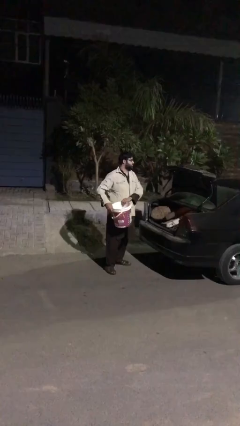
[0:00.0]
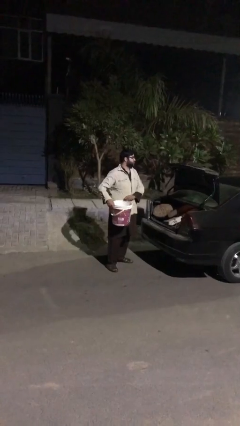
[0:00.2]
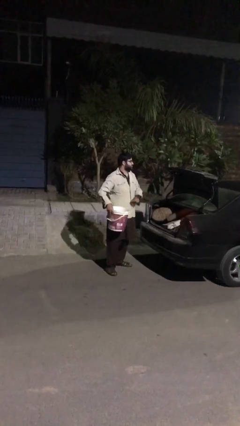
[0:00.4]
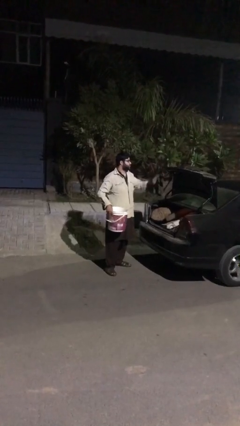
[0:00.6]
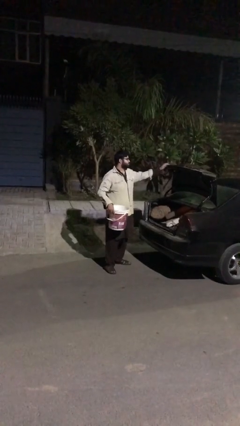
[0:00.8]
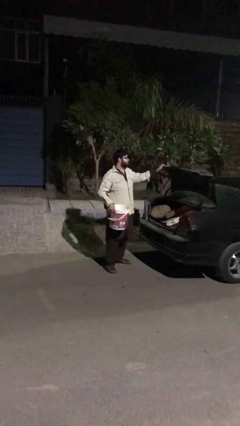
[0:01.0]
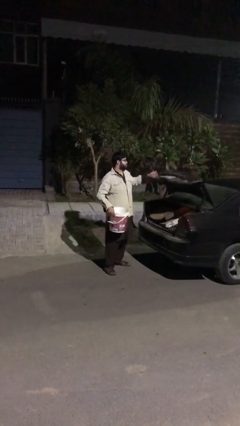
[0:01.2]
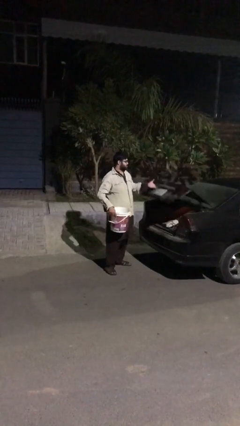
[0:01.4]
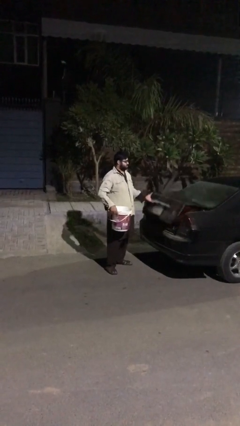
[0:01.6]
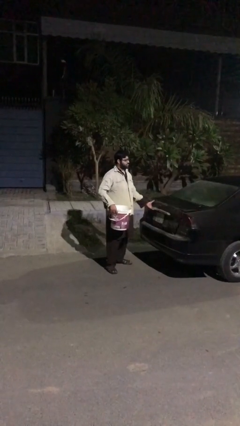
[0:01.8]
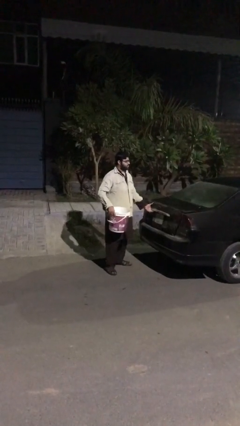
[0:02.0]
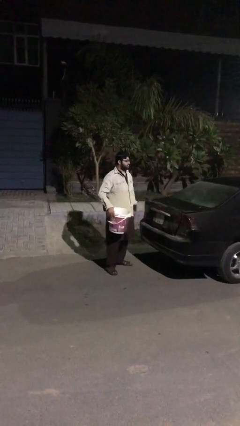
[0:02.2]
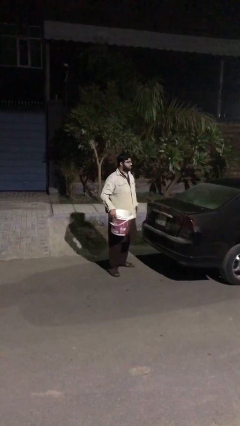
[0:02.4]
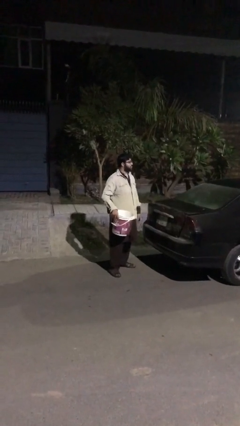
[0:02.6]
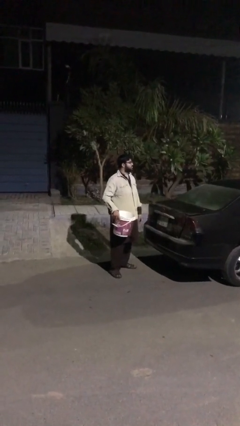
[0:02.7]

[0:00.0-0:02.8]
person closes car trunk

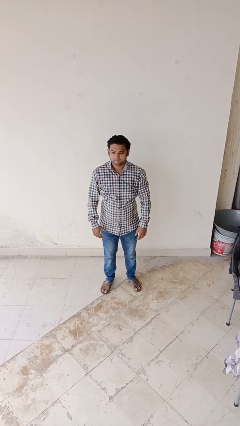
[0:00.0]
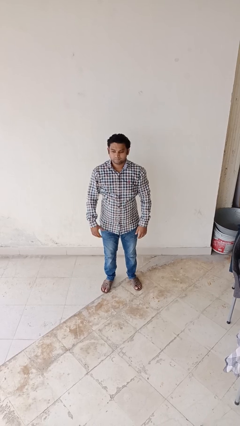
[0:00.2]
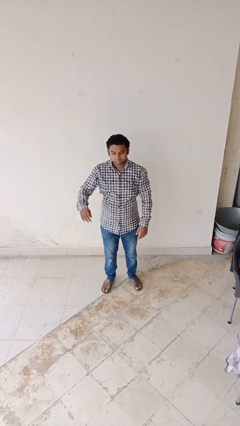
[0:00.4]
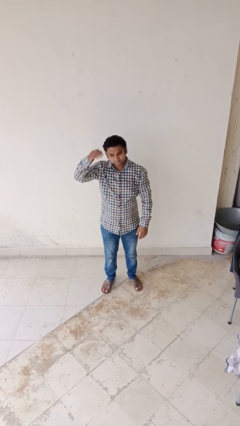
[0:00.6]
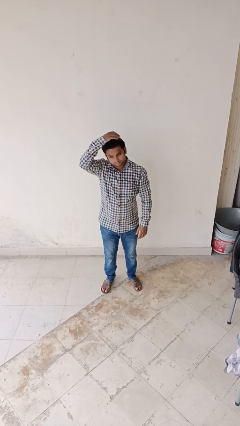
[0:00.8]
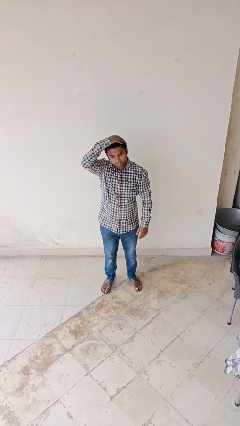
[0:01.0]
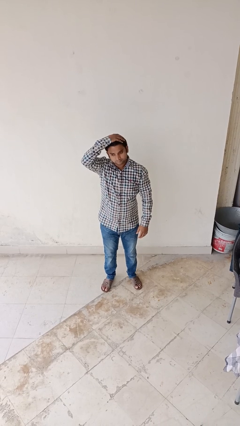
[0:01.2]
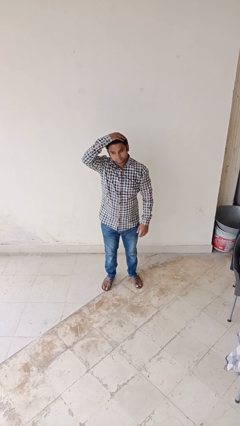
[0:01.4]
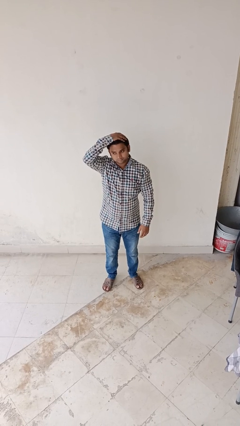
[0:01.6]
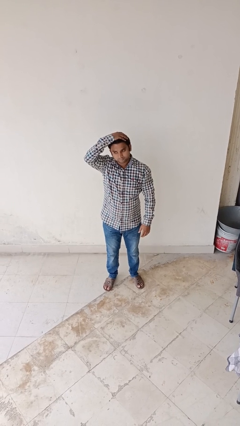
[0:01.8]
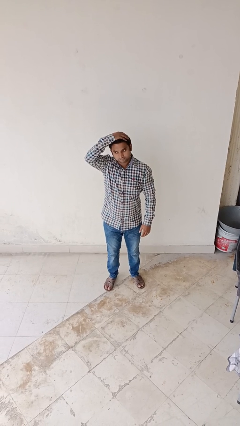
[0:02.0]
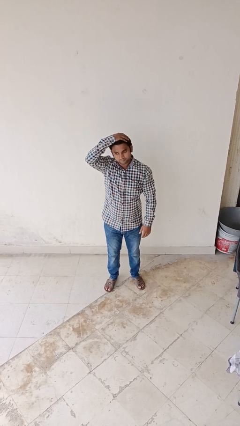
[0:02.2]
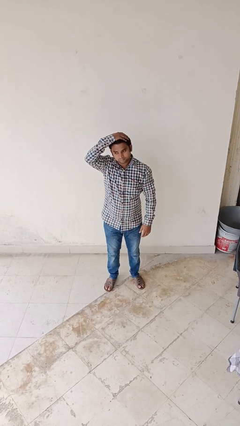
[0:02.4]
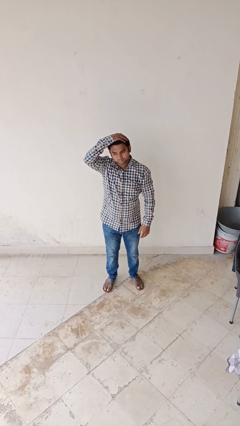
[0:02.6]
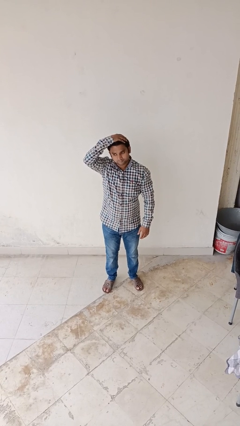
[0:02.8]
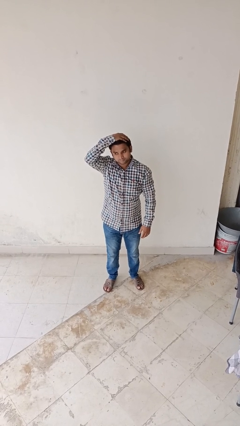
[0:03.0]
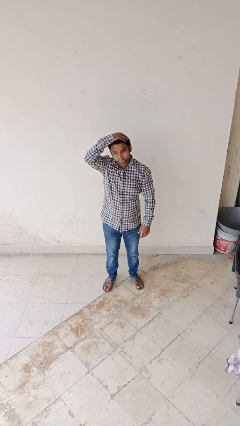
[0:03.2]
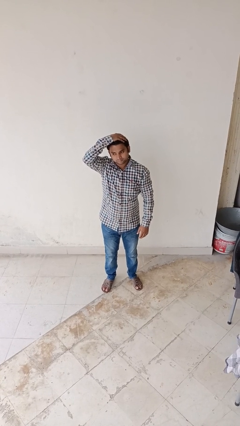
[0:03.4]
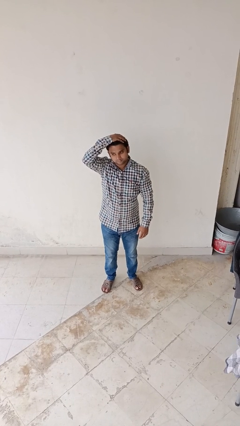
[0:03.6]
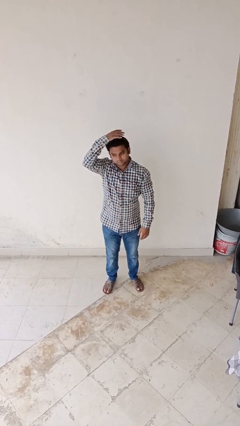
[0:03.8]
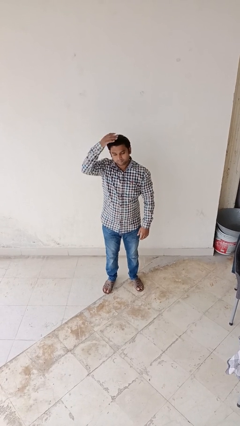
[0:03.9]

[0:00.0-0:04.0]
person pats head

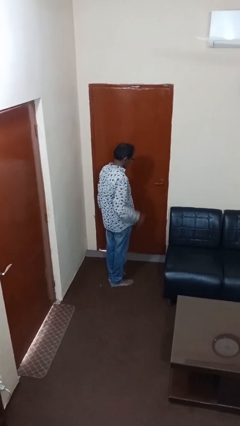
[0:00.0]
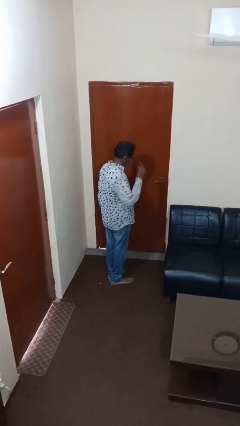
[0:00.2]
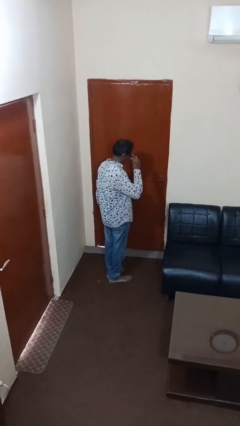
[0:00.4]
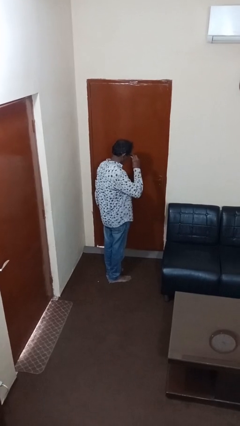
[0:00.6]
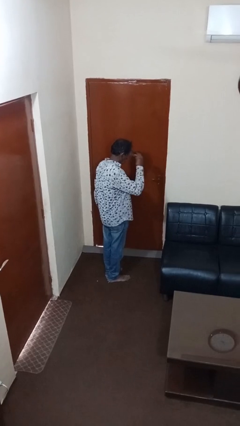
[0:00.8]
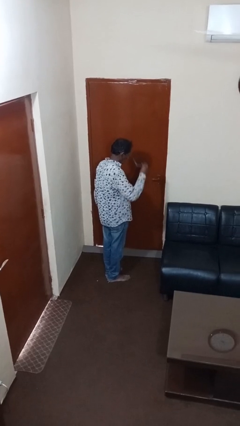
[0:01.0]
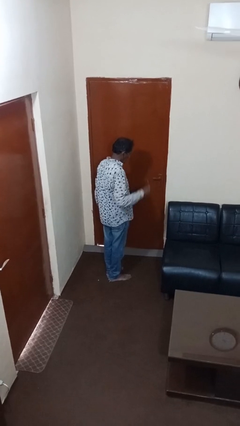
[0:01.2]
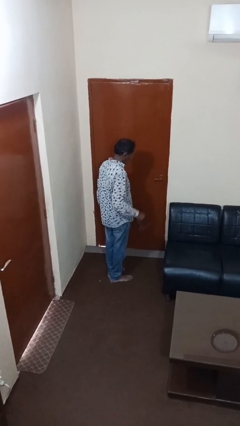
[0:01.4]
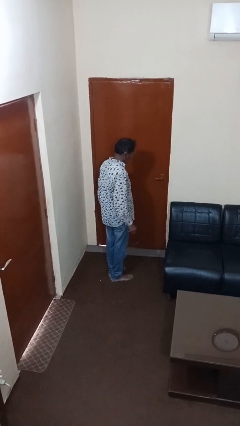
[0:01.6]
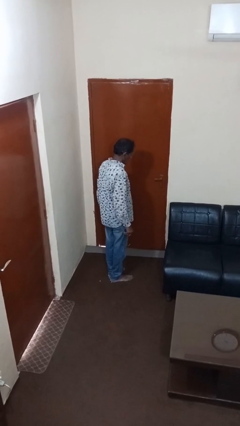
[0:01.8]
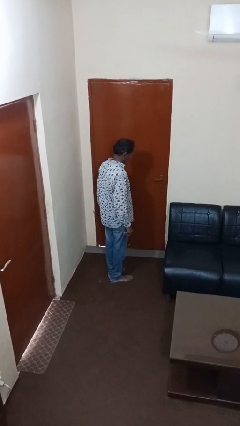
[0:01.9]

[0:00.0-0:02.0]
person takes off glasses

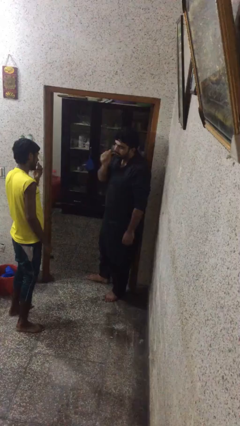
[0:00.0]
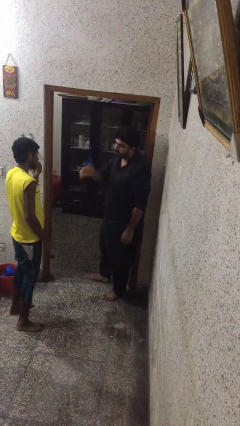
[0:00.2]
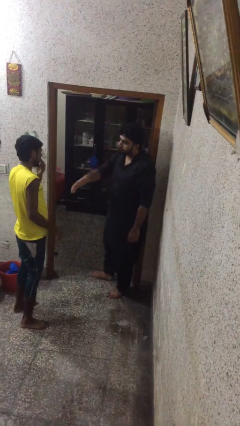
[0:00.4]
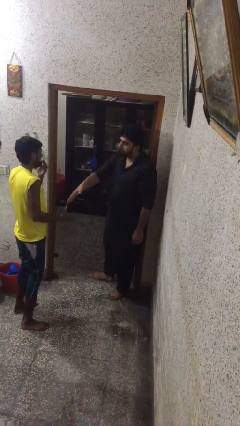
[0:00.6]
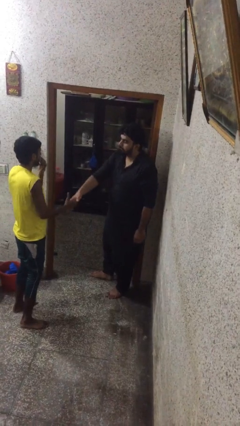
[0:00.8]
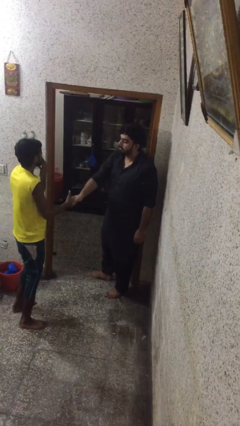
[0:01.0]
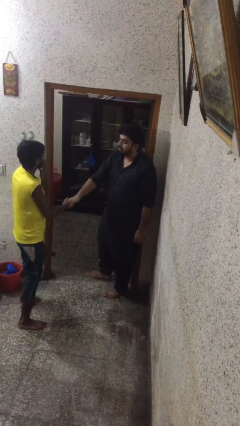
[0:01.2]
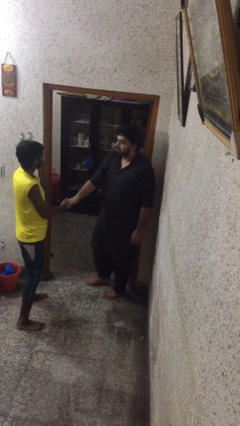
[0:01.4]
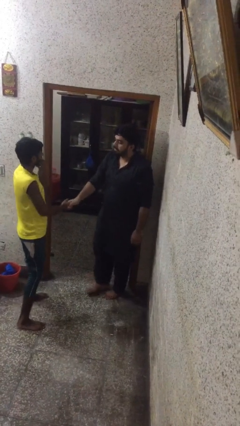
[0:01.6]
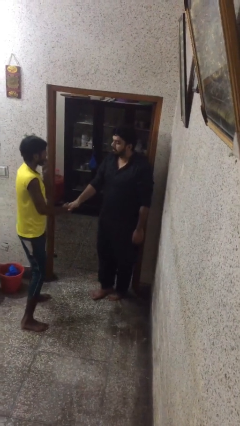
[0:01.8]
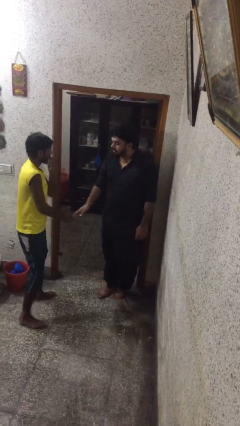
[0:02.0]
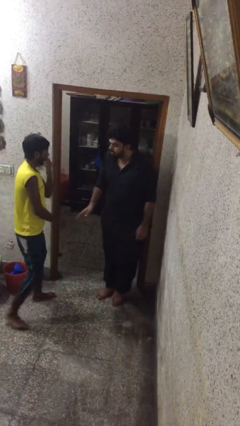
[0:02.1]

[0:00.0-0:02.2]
person shakes hand

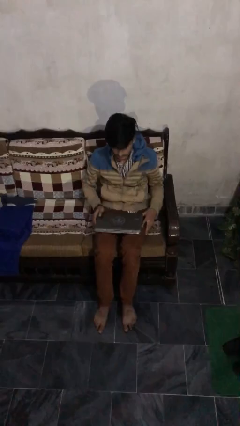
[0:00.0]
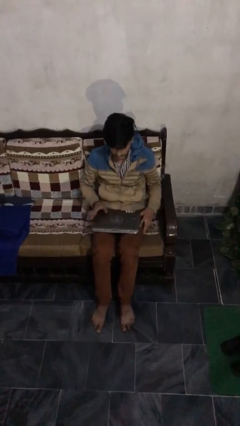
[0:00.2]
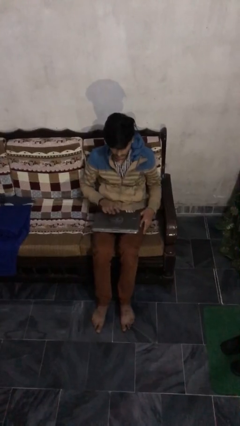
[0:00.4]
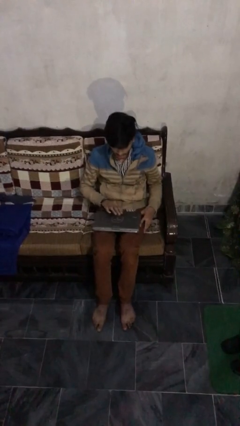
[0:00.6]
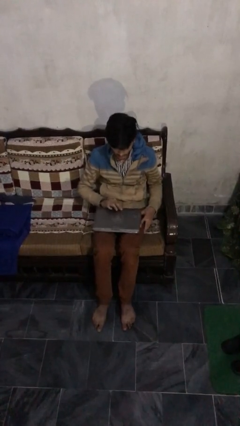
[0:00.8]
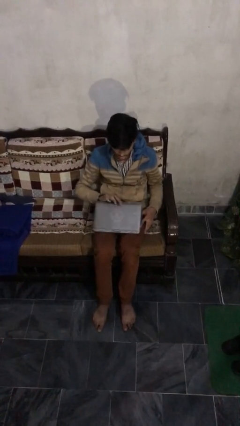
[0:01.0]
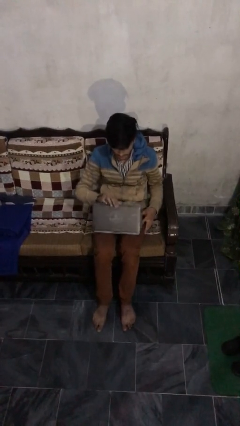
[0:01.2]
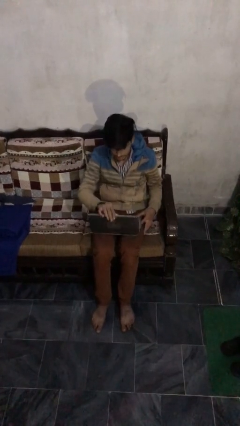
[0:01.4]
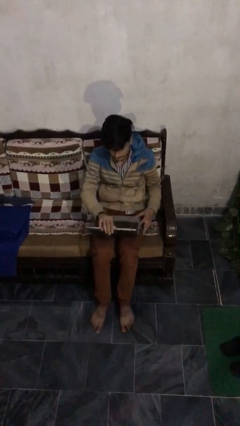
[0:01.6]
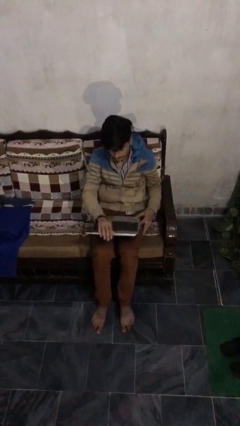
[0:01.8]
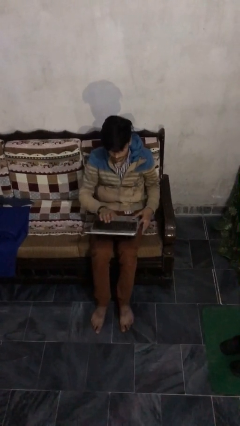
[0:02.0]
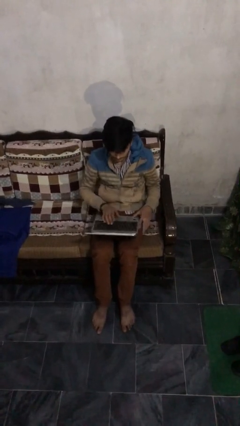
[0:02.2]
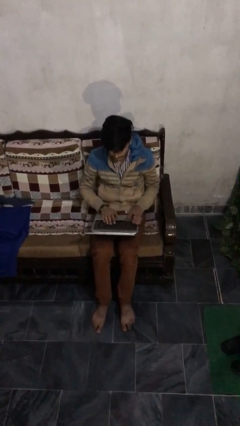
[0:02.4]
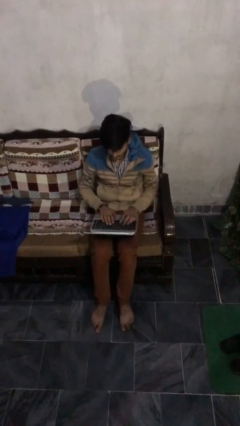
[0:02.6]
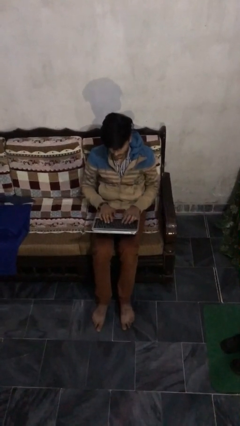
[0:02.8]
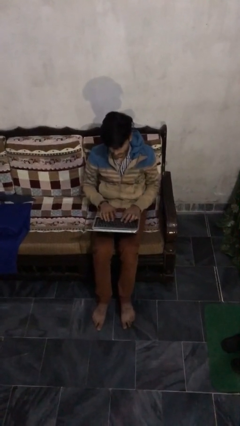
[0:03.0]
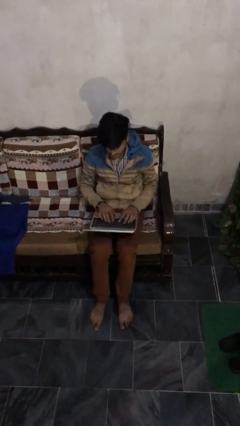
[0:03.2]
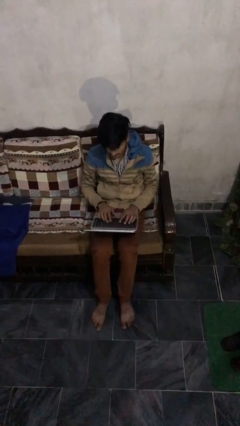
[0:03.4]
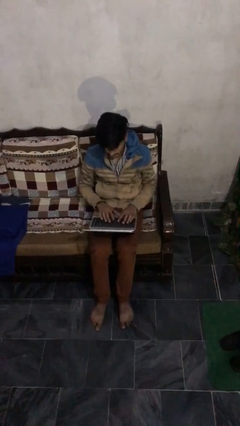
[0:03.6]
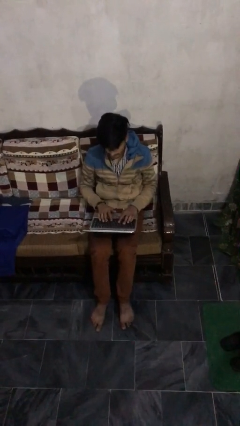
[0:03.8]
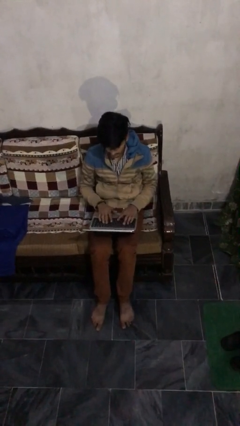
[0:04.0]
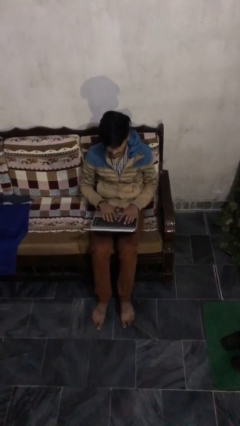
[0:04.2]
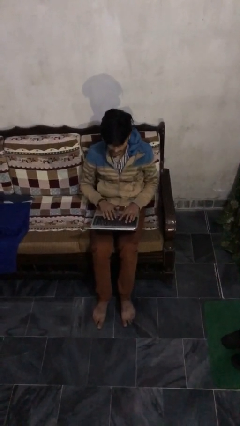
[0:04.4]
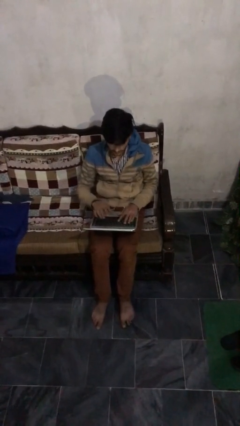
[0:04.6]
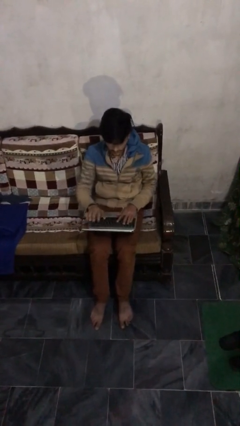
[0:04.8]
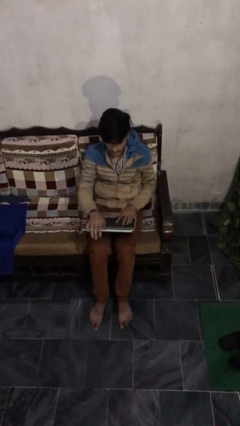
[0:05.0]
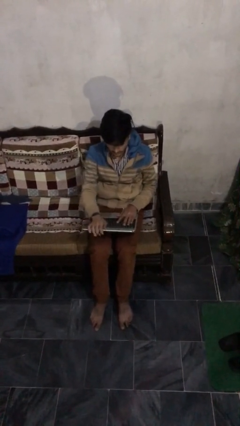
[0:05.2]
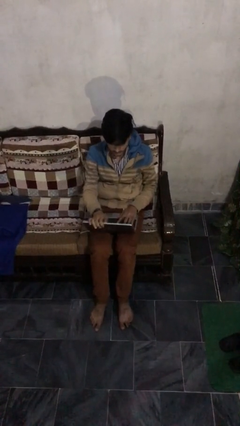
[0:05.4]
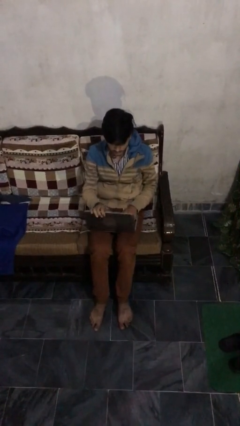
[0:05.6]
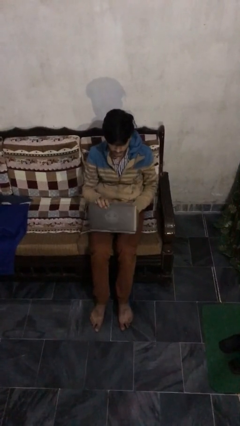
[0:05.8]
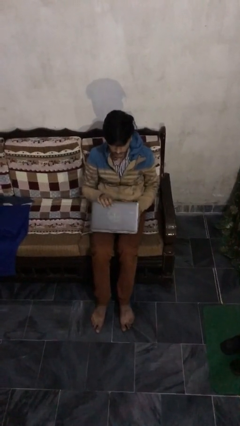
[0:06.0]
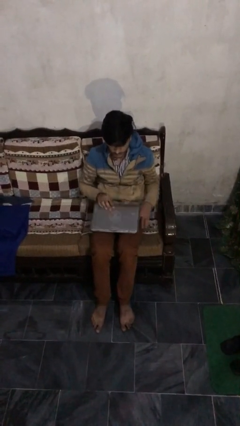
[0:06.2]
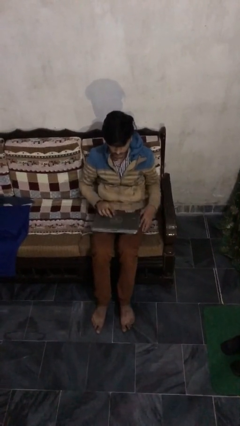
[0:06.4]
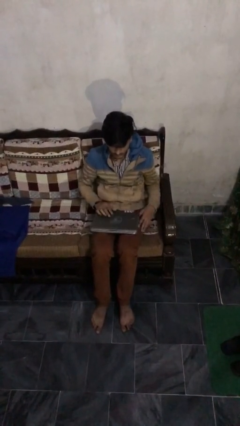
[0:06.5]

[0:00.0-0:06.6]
person interacts with laptop
